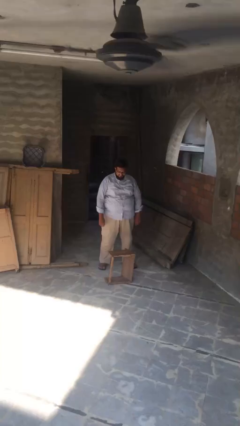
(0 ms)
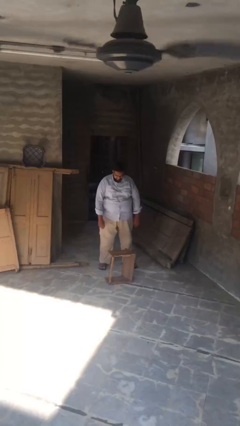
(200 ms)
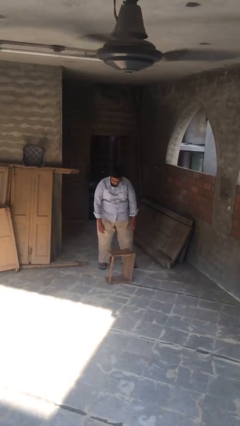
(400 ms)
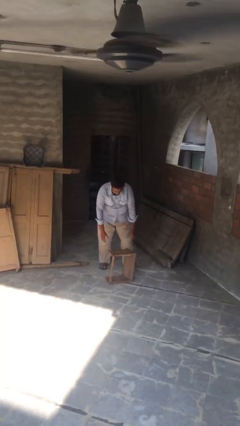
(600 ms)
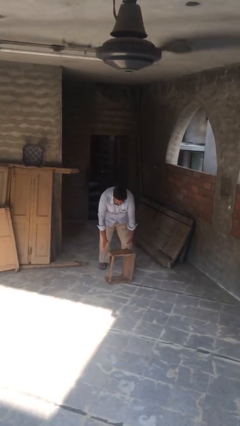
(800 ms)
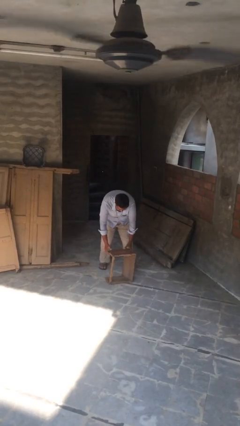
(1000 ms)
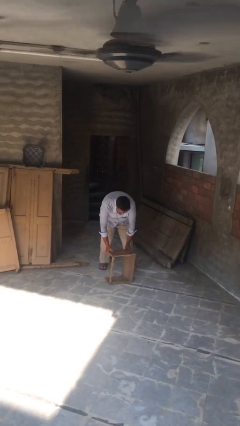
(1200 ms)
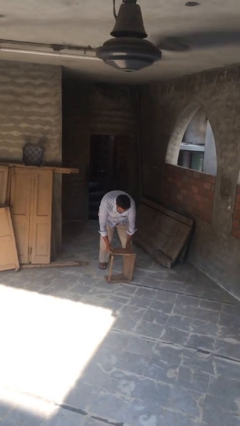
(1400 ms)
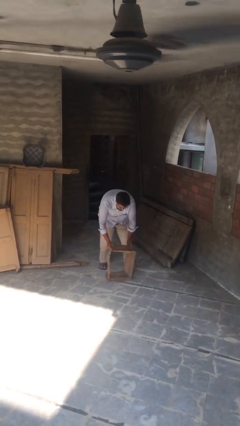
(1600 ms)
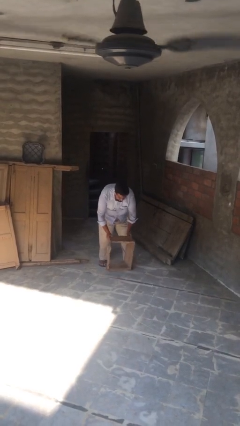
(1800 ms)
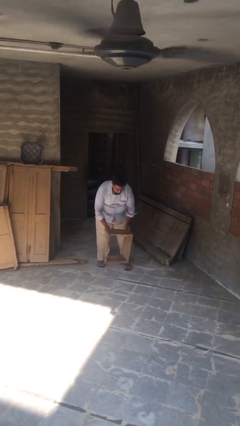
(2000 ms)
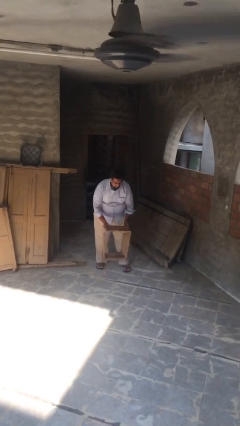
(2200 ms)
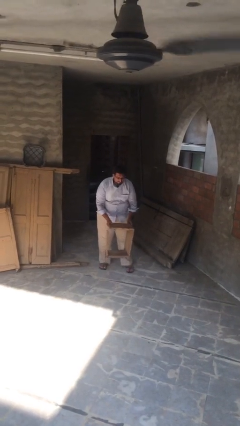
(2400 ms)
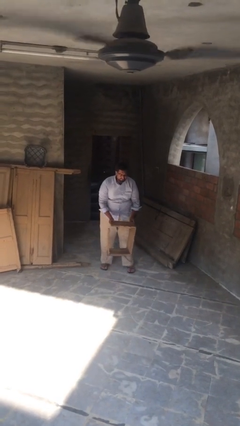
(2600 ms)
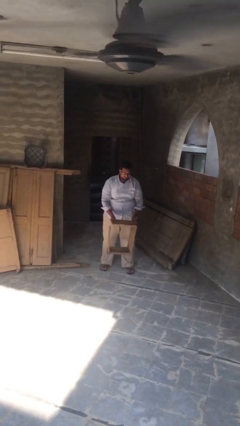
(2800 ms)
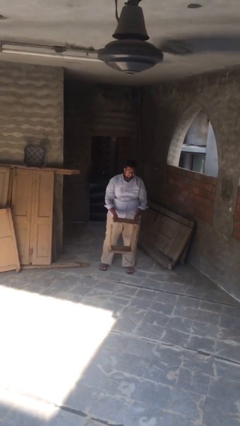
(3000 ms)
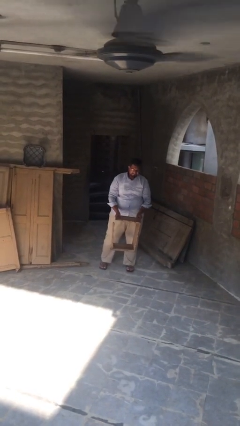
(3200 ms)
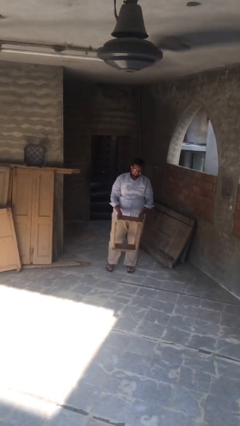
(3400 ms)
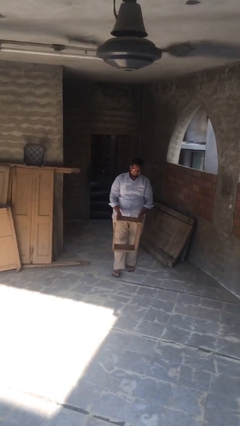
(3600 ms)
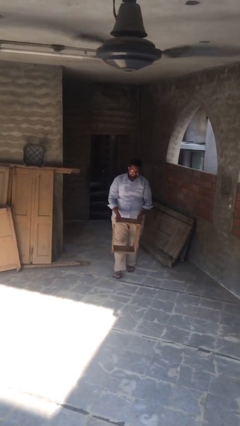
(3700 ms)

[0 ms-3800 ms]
person picks up object from floor

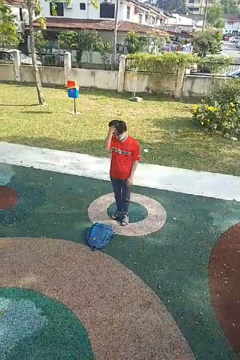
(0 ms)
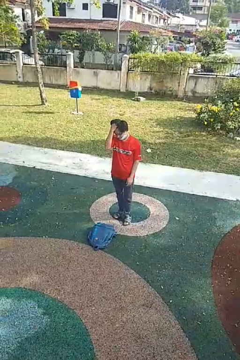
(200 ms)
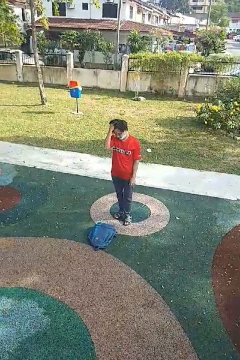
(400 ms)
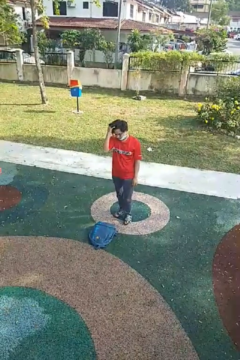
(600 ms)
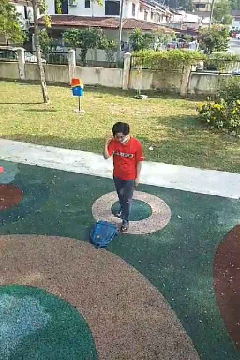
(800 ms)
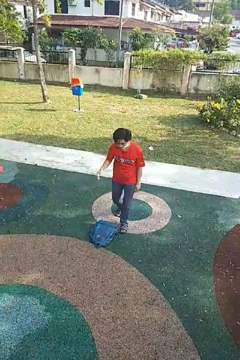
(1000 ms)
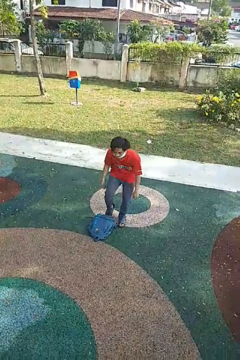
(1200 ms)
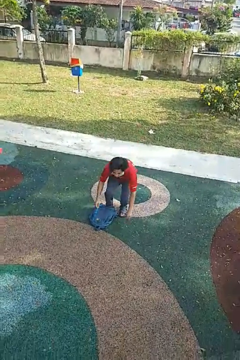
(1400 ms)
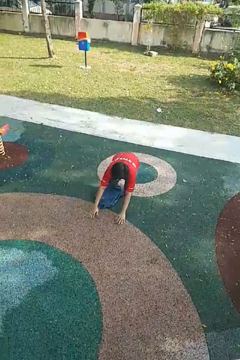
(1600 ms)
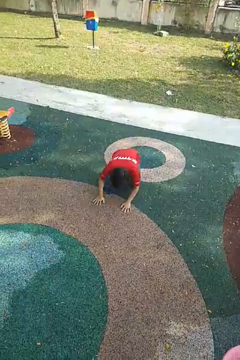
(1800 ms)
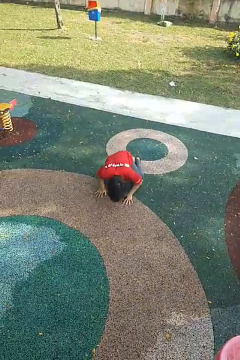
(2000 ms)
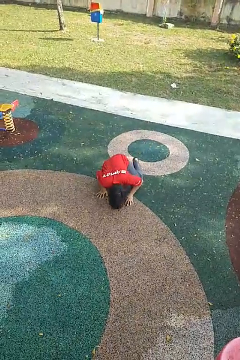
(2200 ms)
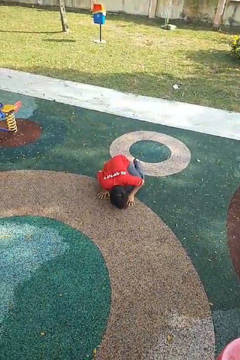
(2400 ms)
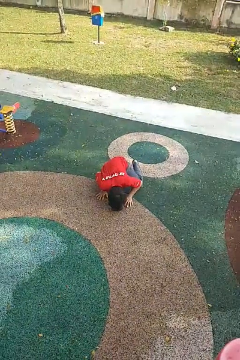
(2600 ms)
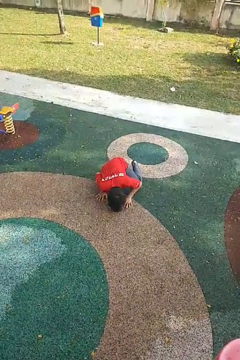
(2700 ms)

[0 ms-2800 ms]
person trips on object on floor

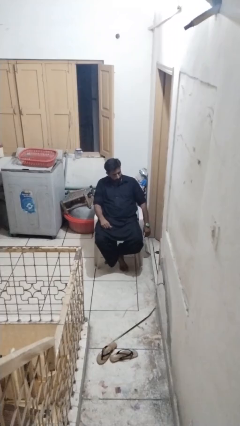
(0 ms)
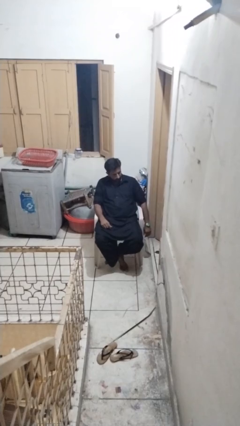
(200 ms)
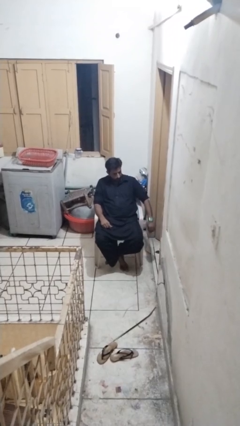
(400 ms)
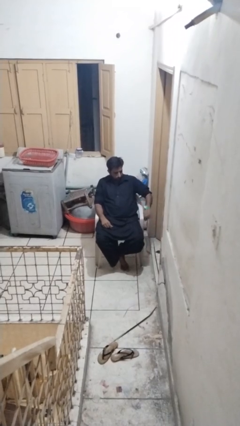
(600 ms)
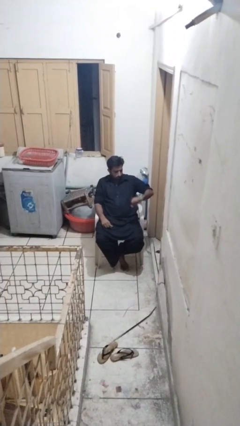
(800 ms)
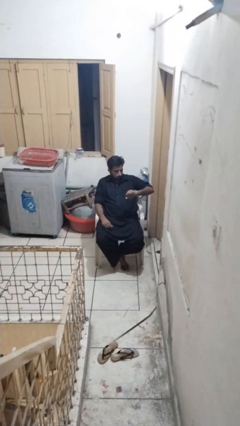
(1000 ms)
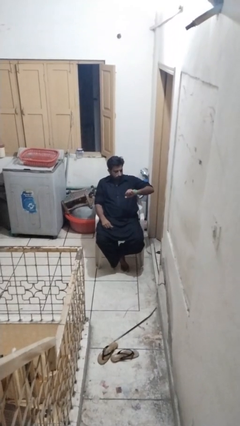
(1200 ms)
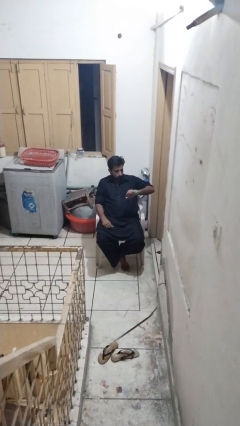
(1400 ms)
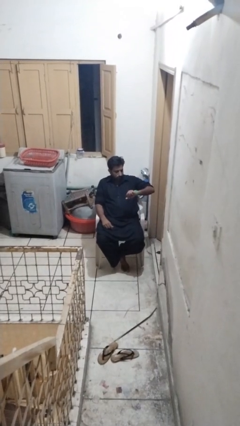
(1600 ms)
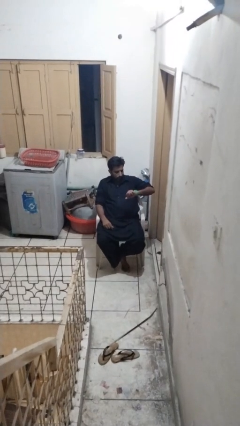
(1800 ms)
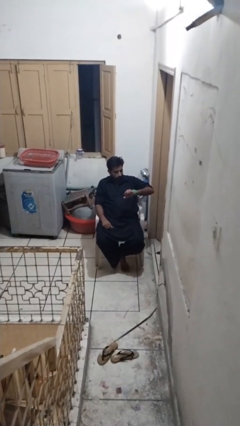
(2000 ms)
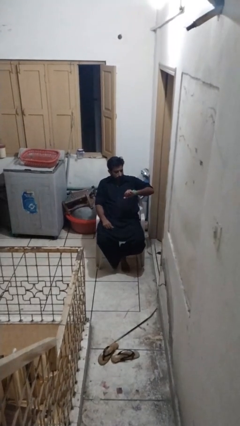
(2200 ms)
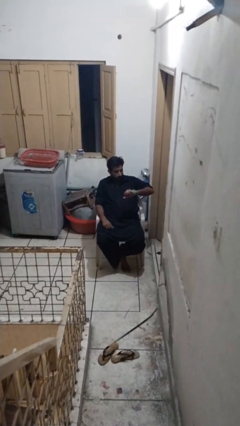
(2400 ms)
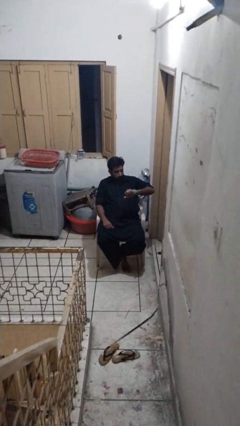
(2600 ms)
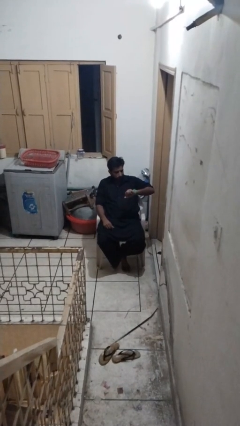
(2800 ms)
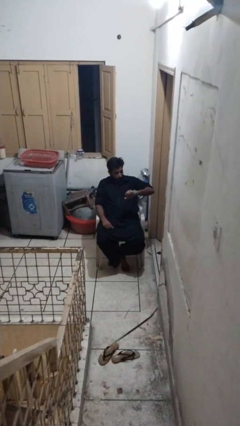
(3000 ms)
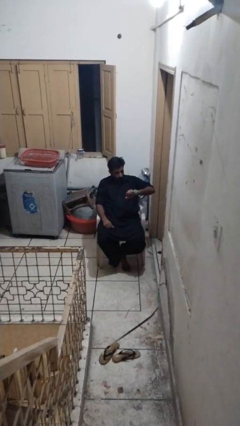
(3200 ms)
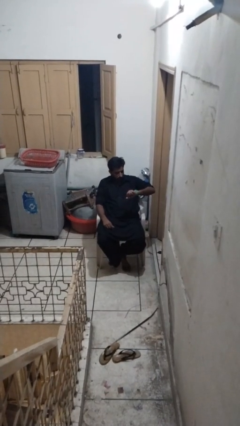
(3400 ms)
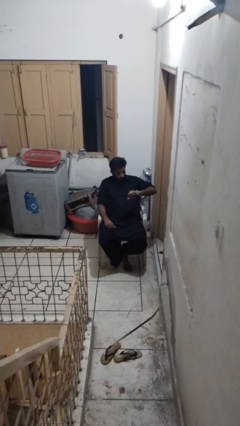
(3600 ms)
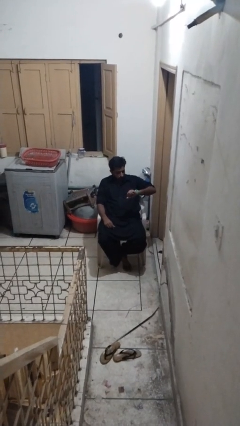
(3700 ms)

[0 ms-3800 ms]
person looks at wristwatch

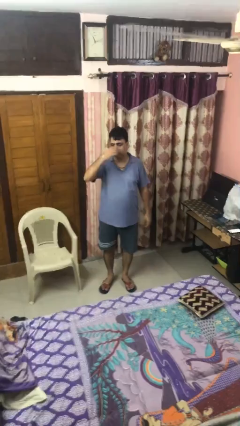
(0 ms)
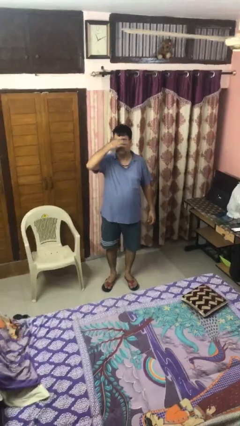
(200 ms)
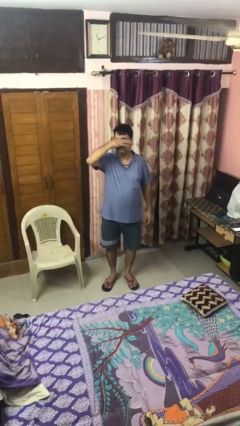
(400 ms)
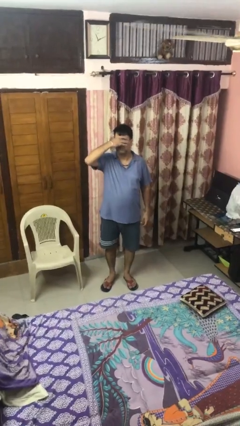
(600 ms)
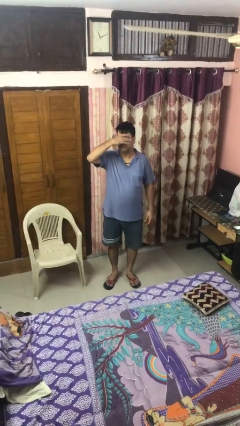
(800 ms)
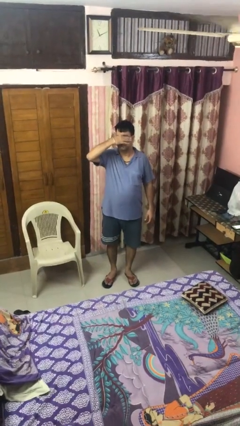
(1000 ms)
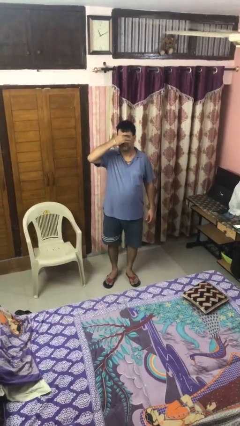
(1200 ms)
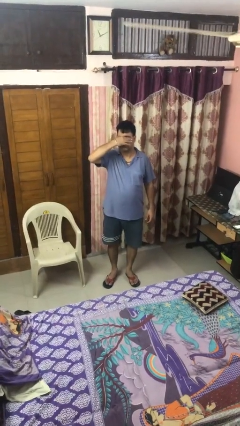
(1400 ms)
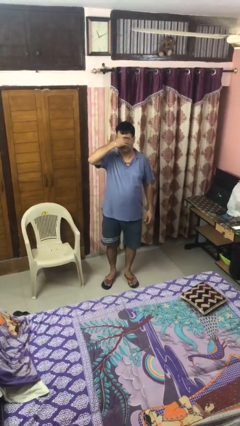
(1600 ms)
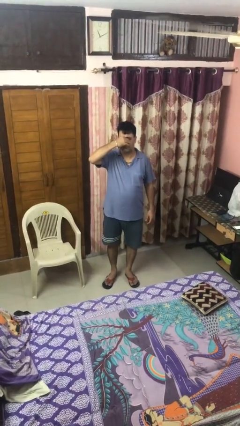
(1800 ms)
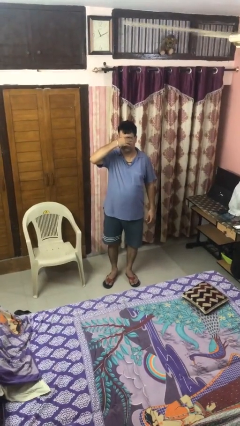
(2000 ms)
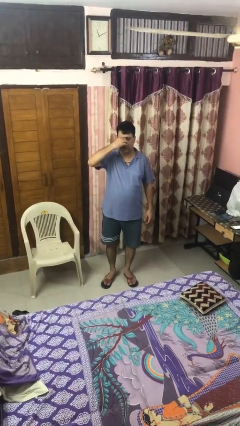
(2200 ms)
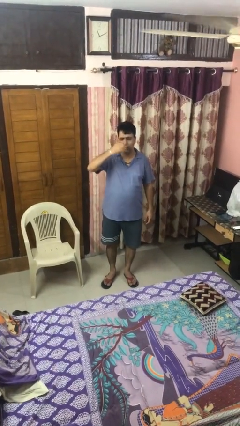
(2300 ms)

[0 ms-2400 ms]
person rubs eyes

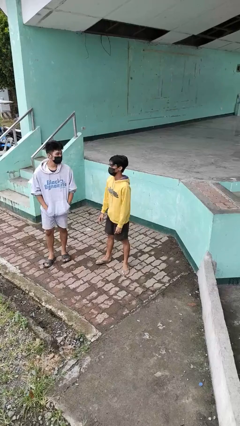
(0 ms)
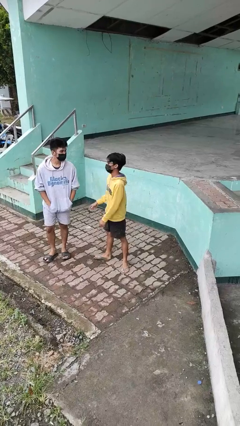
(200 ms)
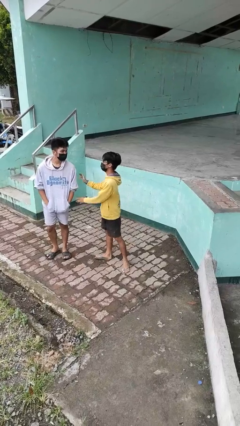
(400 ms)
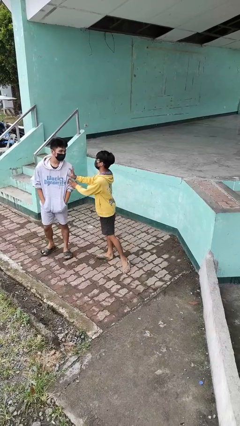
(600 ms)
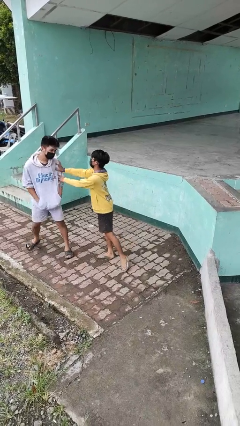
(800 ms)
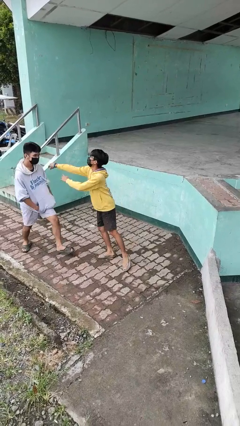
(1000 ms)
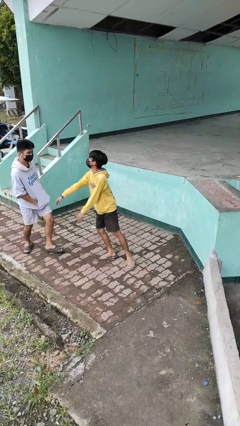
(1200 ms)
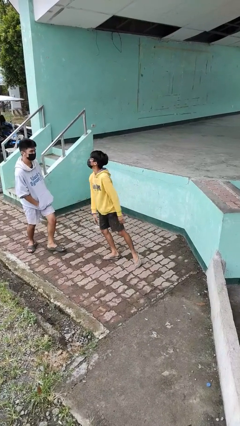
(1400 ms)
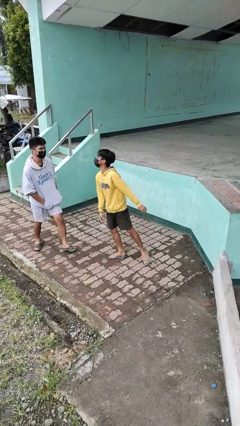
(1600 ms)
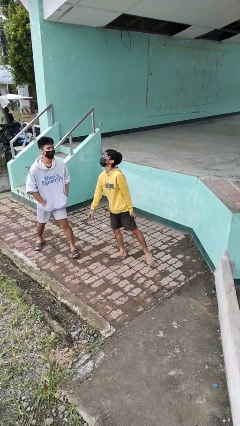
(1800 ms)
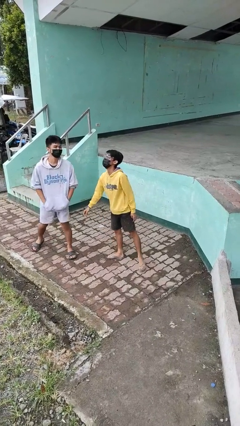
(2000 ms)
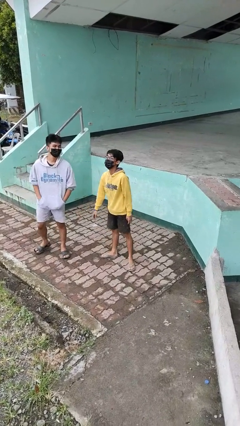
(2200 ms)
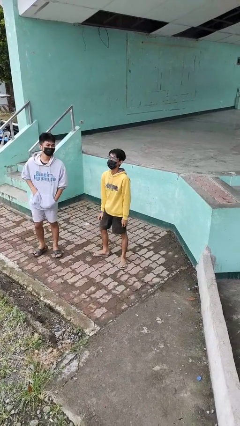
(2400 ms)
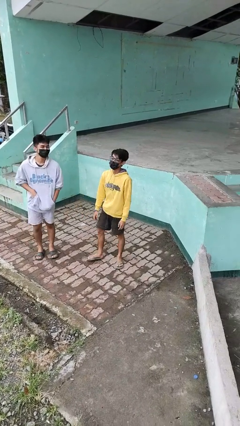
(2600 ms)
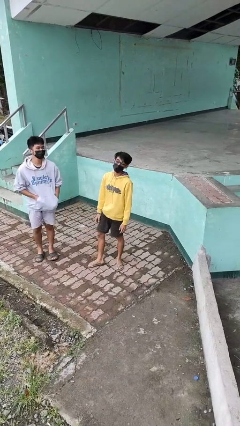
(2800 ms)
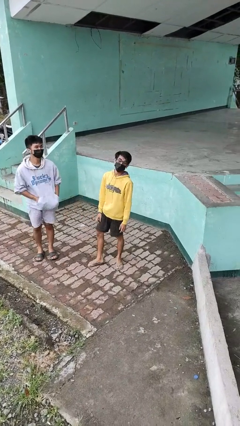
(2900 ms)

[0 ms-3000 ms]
person shoves person

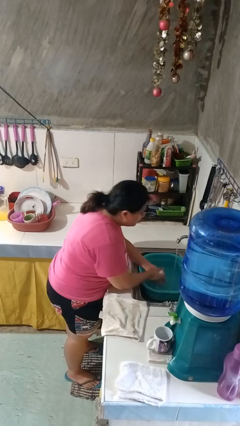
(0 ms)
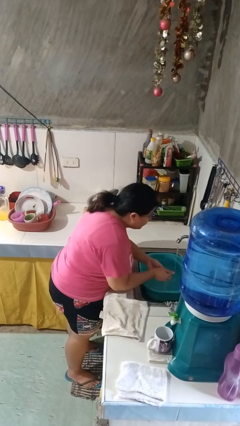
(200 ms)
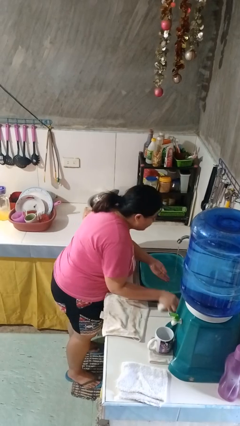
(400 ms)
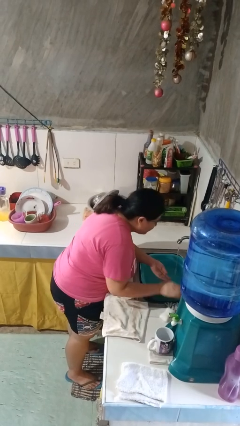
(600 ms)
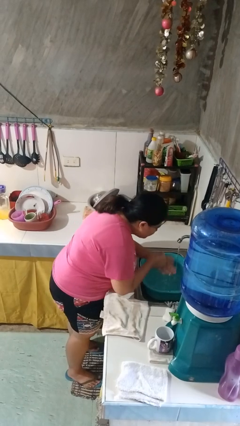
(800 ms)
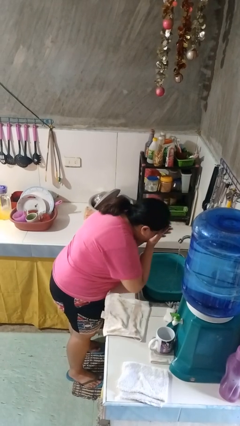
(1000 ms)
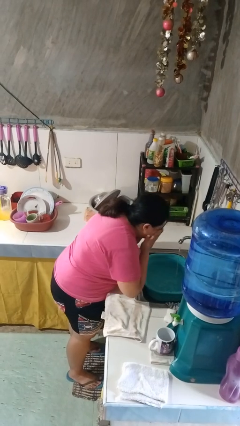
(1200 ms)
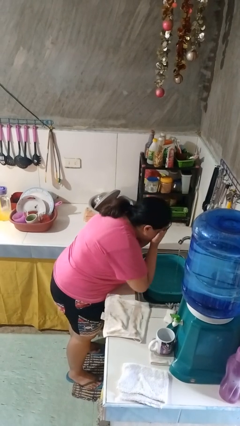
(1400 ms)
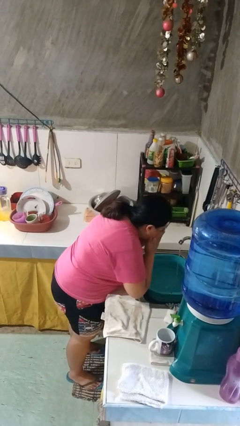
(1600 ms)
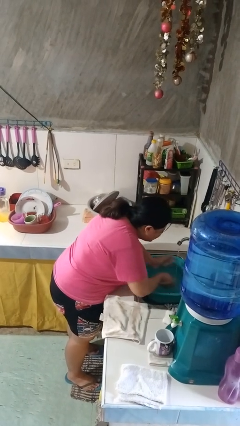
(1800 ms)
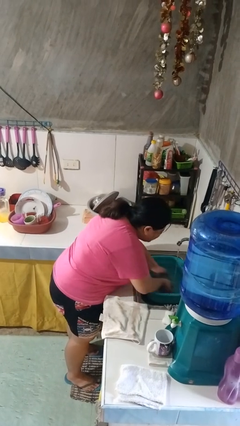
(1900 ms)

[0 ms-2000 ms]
person washes face
